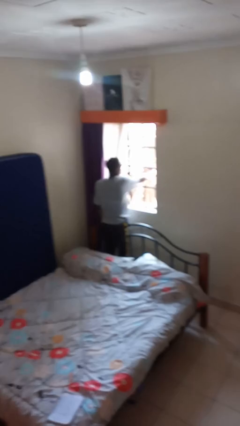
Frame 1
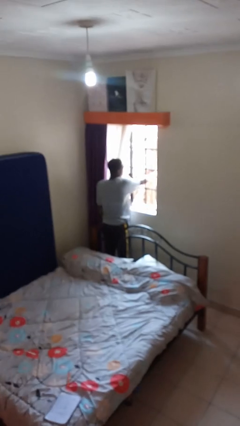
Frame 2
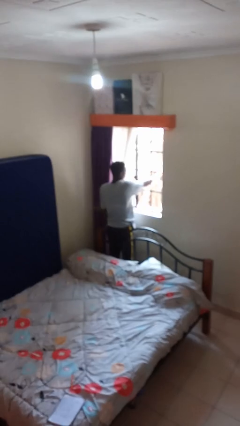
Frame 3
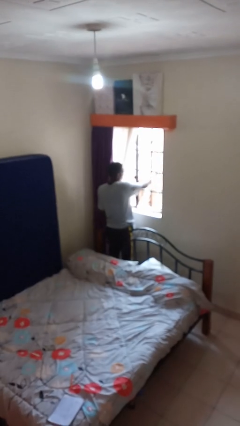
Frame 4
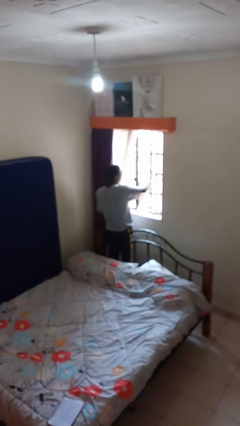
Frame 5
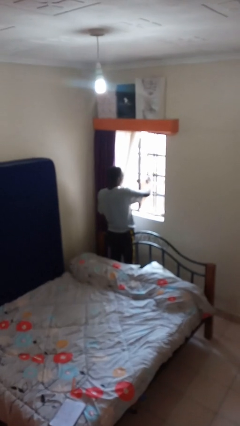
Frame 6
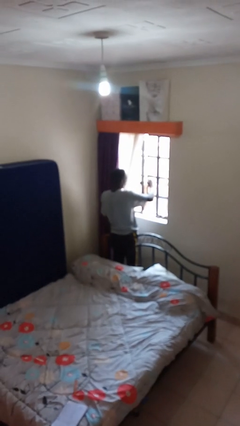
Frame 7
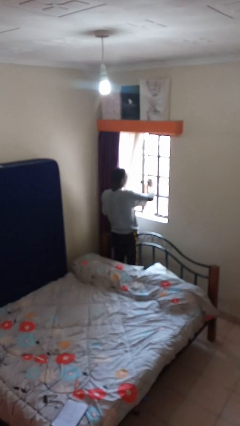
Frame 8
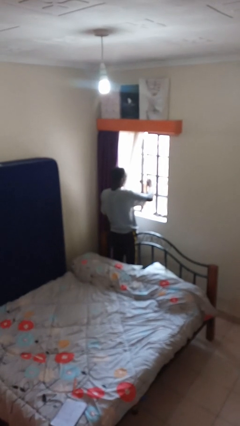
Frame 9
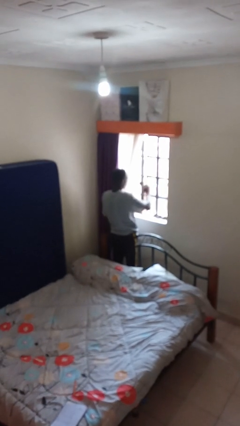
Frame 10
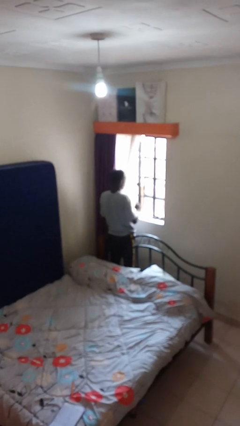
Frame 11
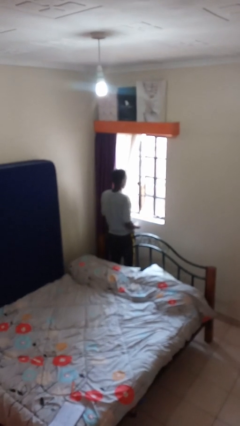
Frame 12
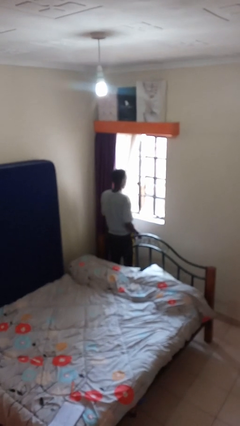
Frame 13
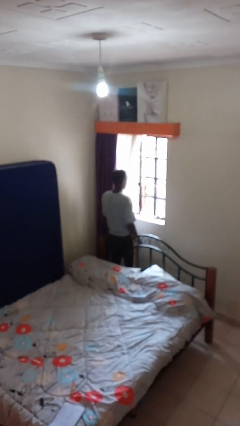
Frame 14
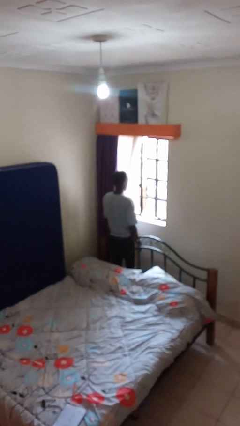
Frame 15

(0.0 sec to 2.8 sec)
person closes home window

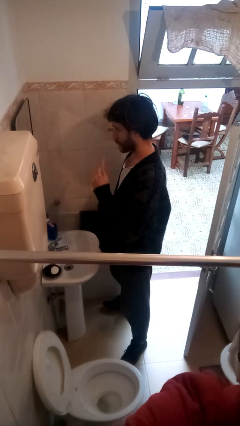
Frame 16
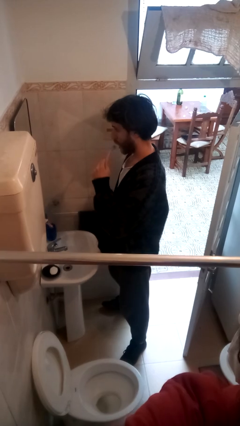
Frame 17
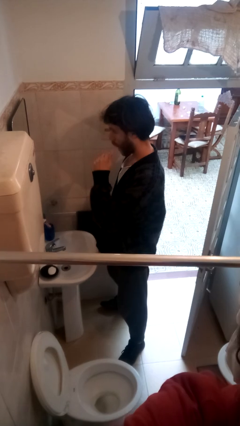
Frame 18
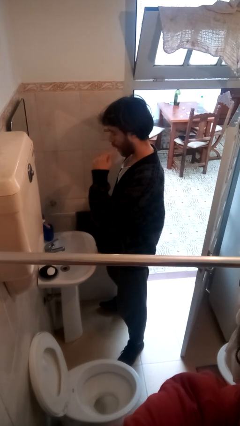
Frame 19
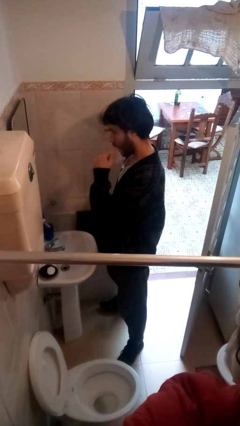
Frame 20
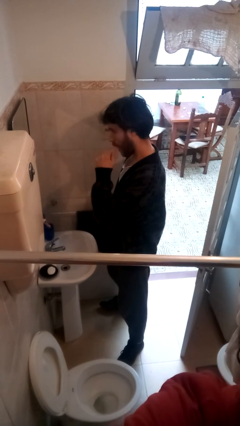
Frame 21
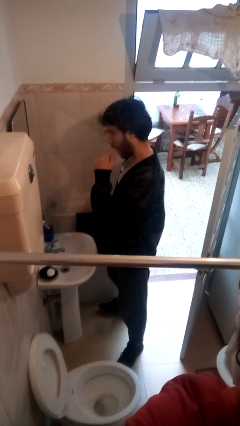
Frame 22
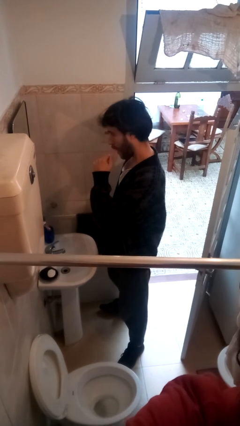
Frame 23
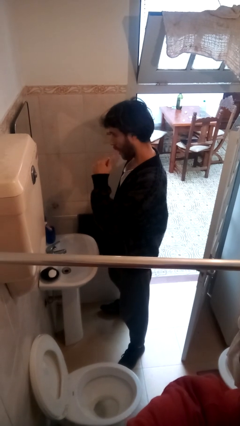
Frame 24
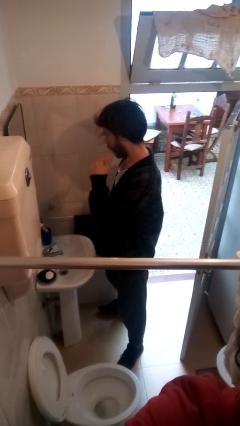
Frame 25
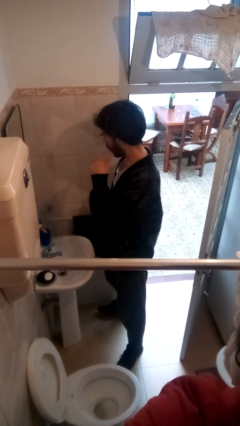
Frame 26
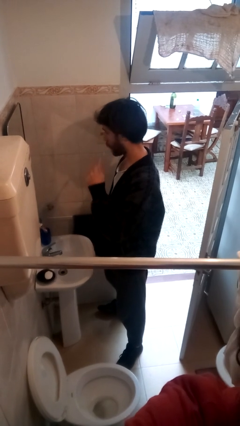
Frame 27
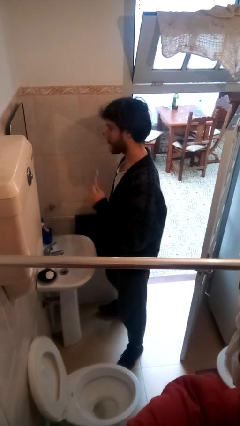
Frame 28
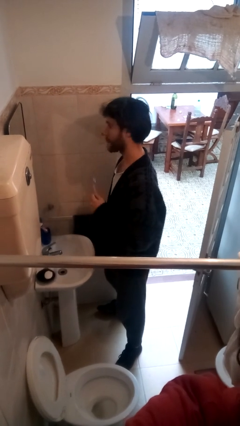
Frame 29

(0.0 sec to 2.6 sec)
person brushes teeth

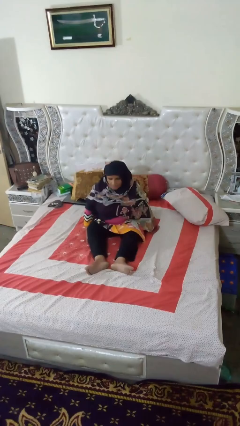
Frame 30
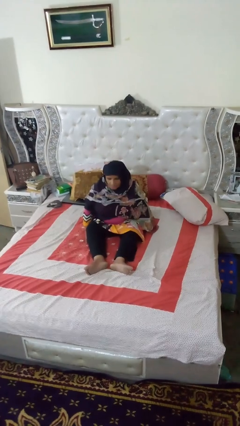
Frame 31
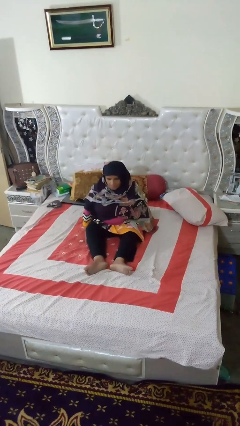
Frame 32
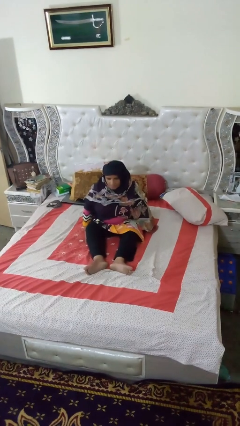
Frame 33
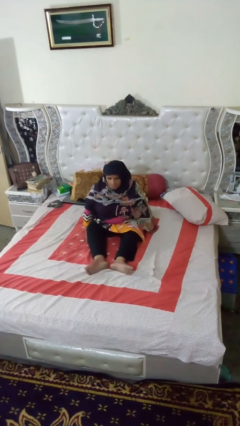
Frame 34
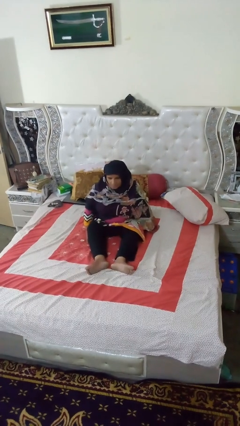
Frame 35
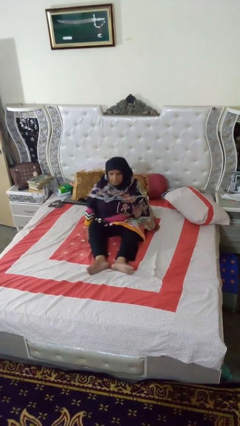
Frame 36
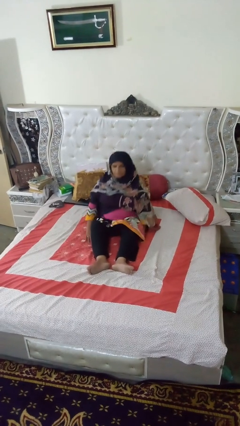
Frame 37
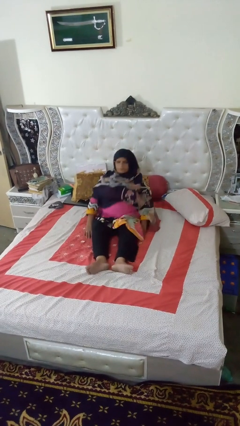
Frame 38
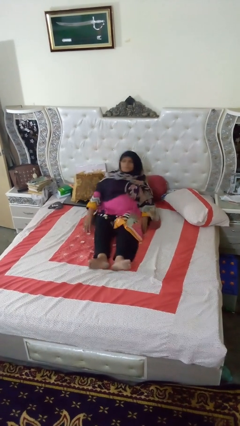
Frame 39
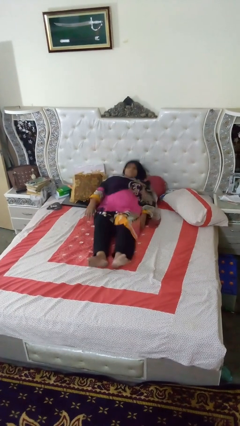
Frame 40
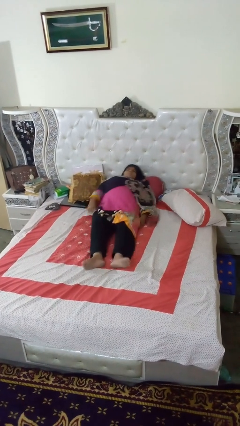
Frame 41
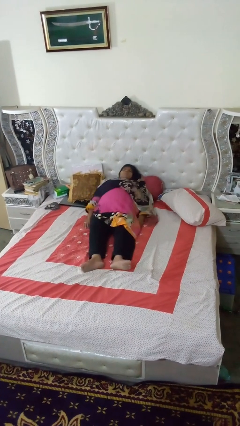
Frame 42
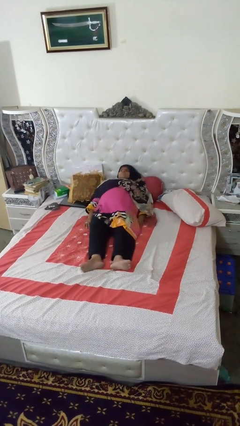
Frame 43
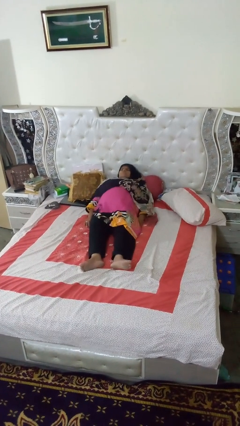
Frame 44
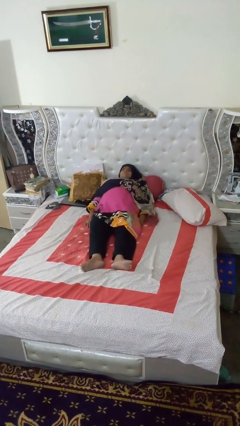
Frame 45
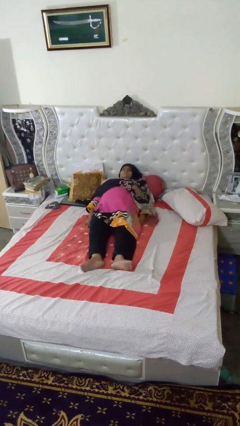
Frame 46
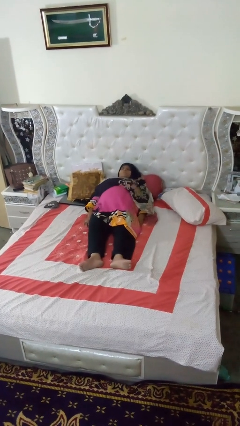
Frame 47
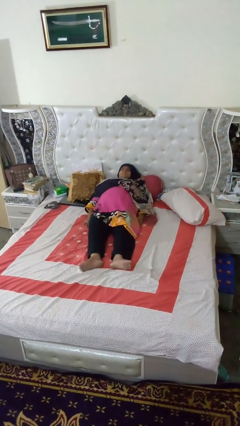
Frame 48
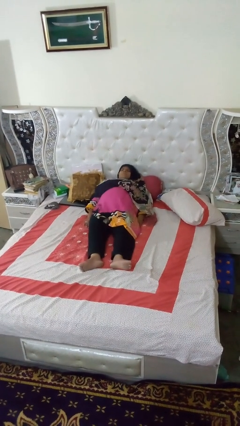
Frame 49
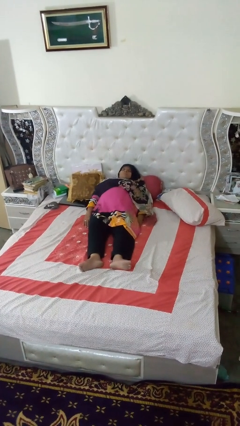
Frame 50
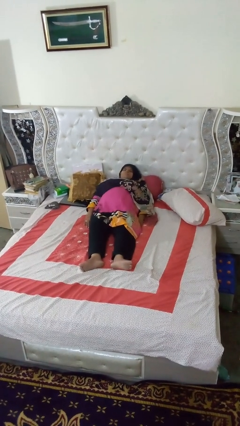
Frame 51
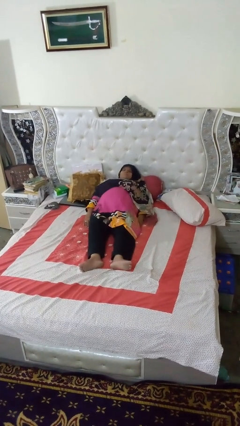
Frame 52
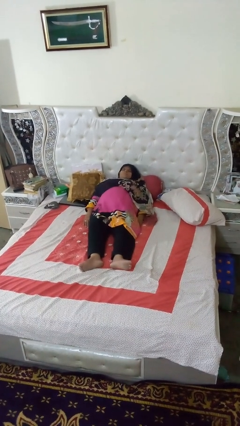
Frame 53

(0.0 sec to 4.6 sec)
person lies down on bed

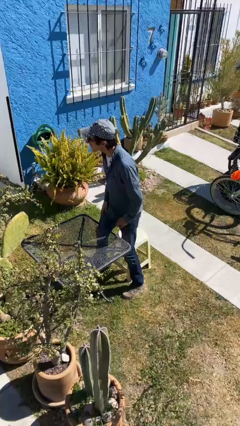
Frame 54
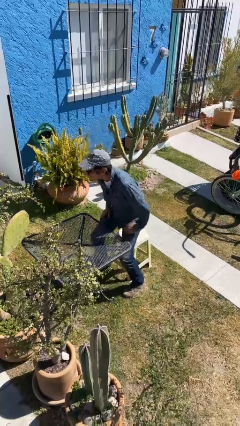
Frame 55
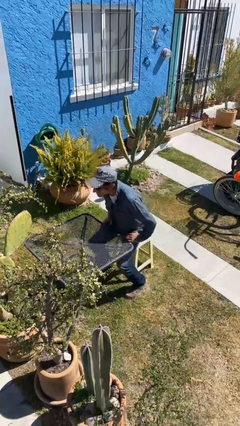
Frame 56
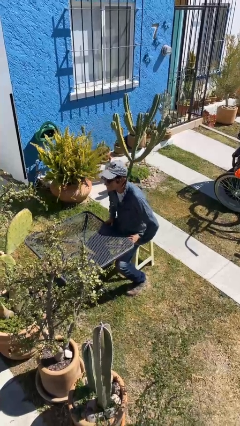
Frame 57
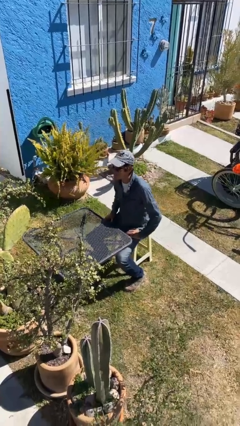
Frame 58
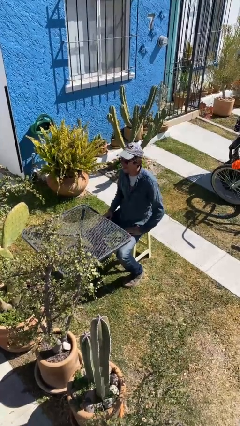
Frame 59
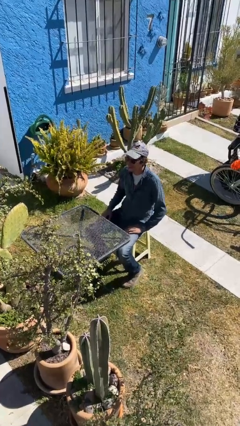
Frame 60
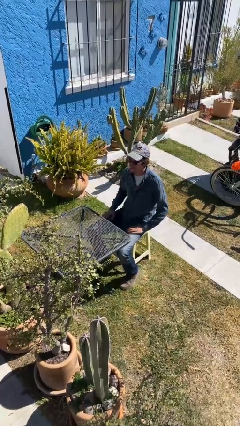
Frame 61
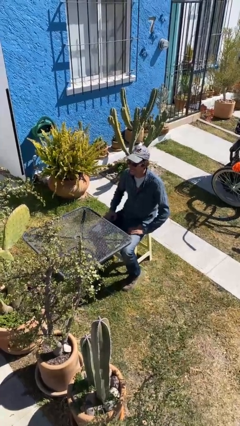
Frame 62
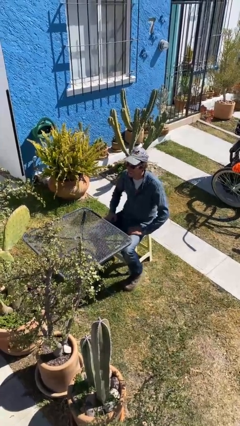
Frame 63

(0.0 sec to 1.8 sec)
person sits down

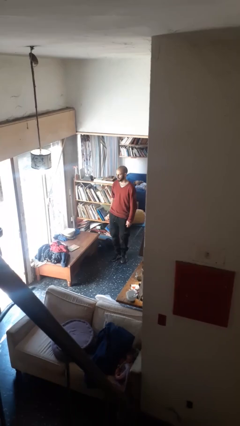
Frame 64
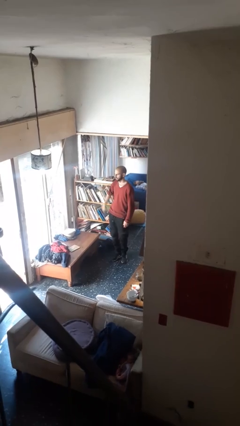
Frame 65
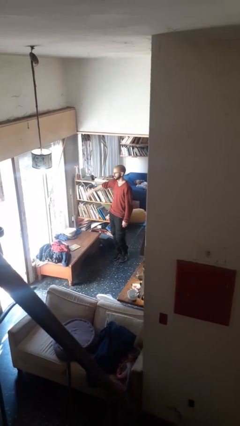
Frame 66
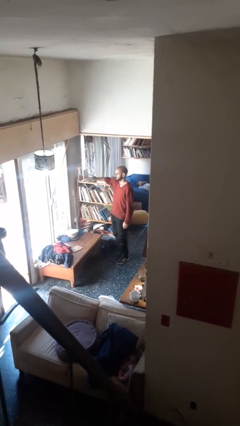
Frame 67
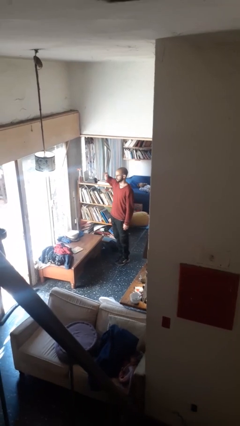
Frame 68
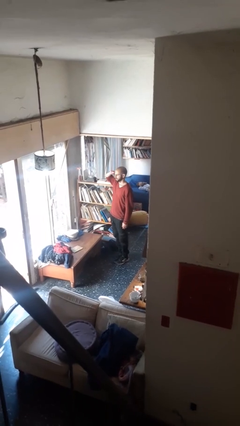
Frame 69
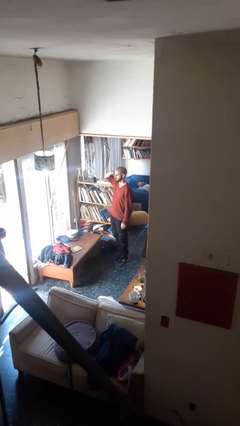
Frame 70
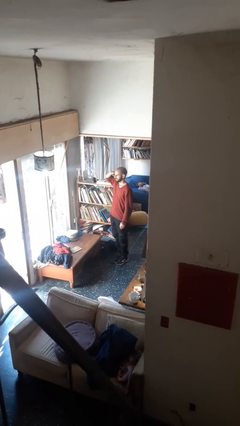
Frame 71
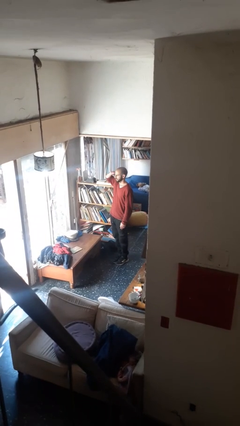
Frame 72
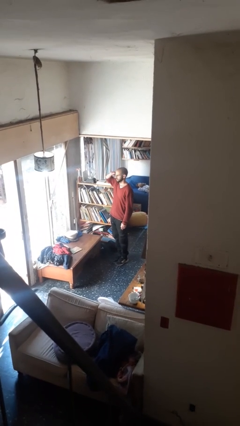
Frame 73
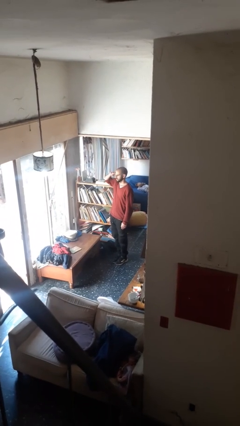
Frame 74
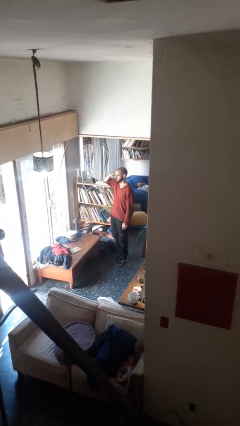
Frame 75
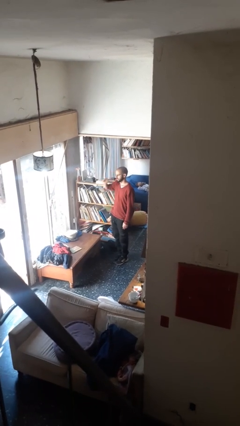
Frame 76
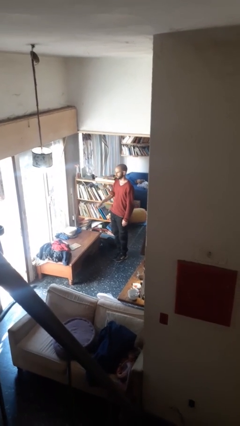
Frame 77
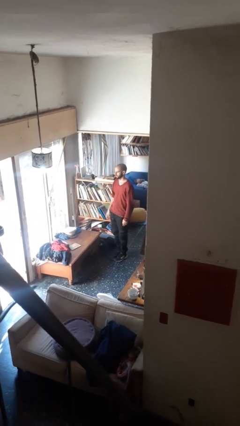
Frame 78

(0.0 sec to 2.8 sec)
person salutes

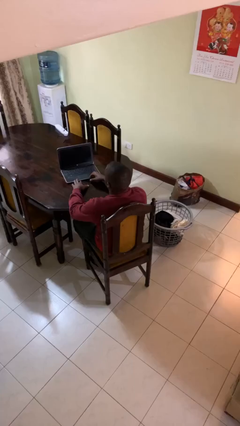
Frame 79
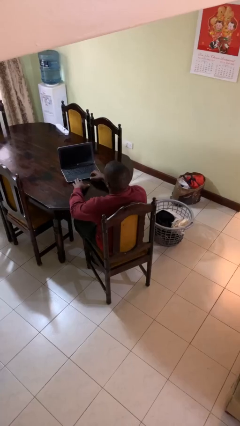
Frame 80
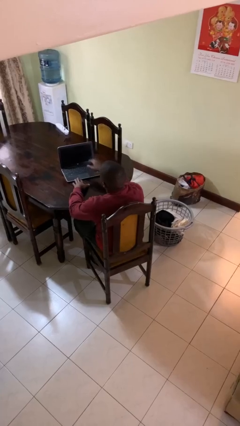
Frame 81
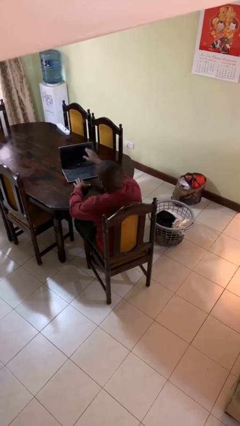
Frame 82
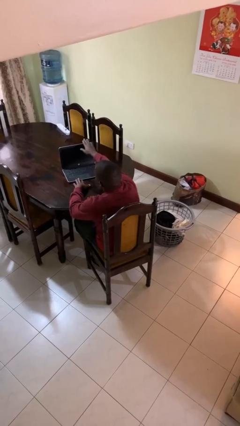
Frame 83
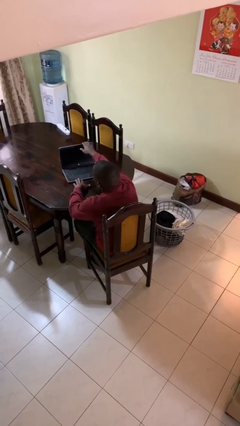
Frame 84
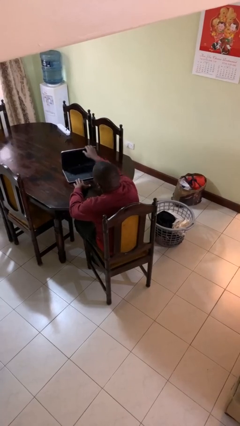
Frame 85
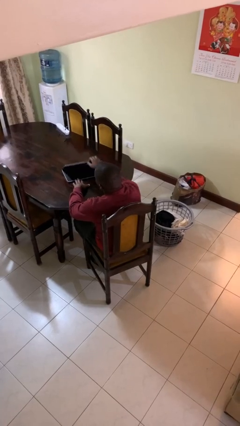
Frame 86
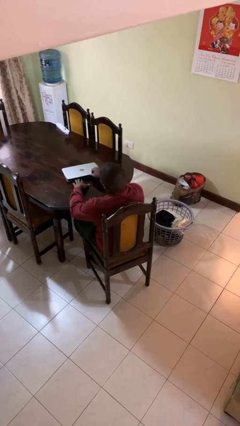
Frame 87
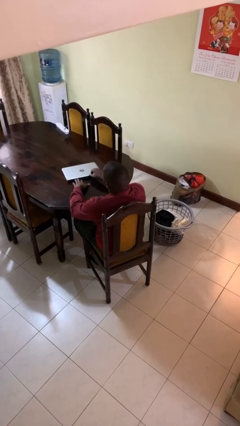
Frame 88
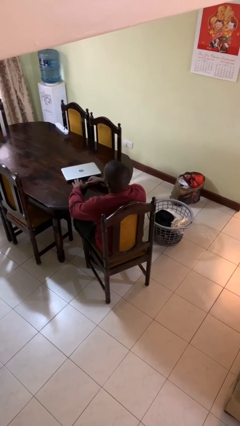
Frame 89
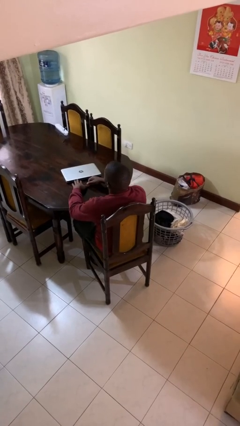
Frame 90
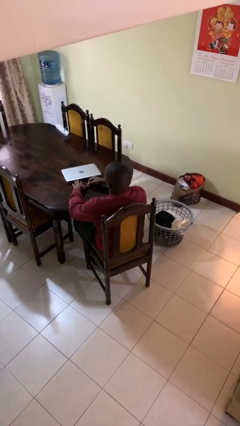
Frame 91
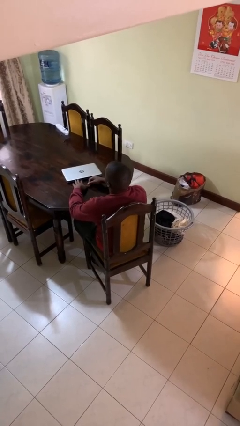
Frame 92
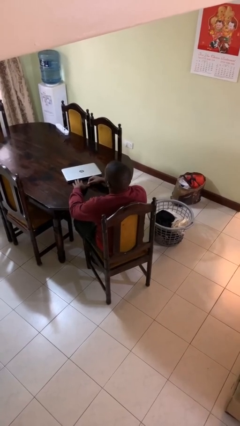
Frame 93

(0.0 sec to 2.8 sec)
person closes laptop

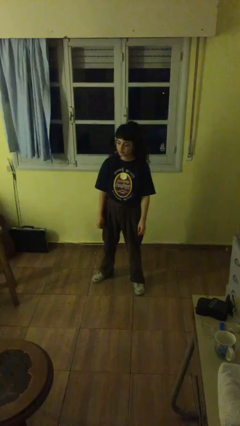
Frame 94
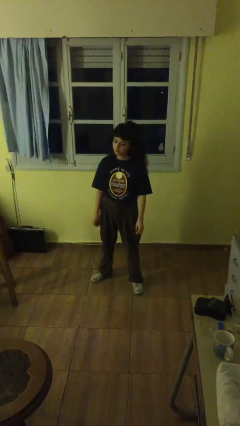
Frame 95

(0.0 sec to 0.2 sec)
person karate kicks
